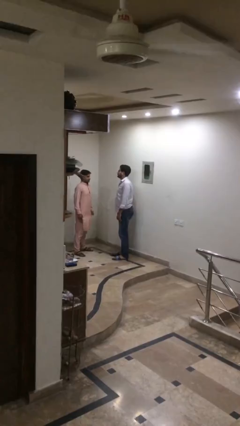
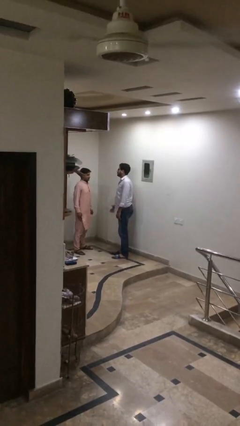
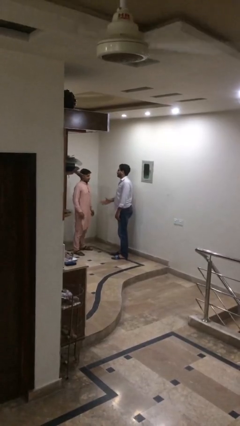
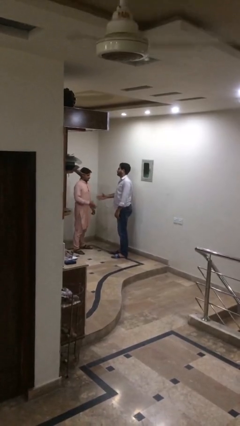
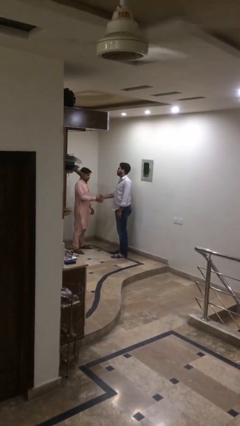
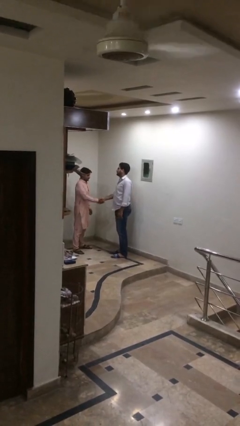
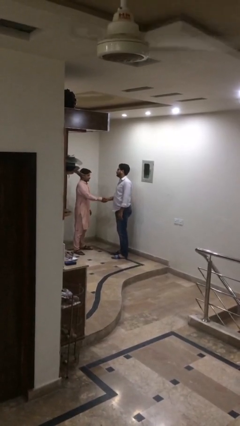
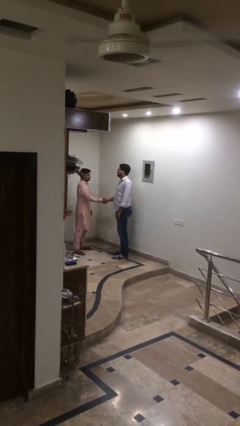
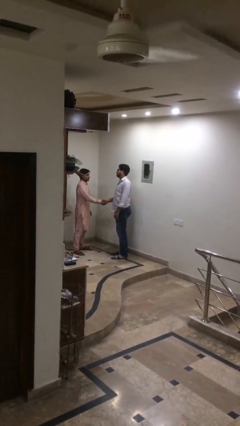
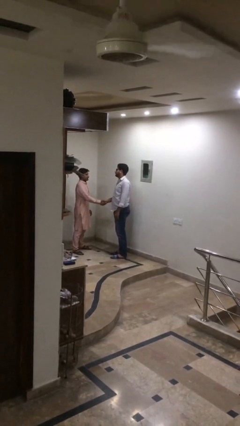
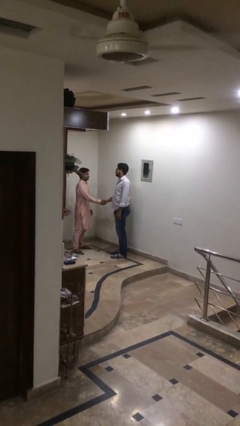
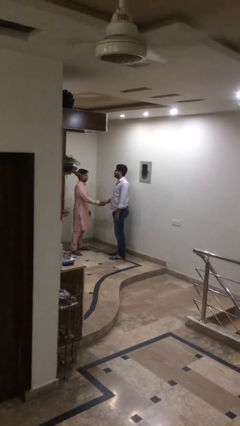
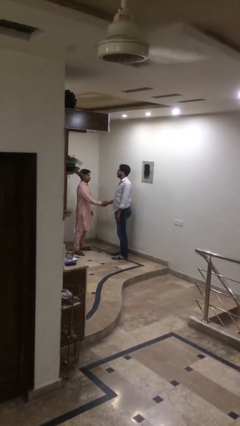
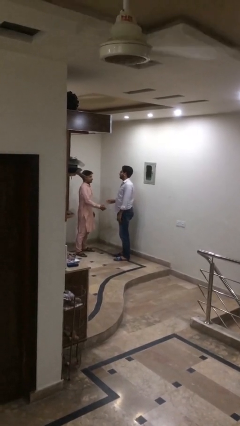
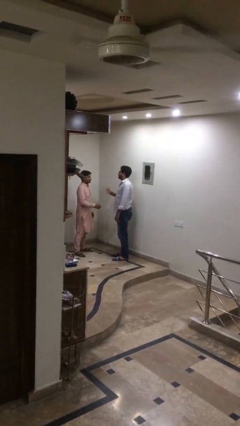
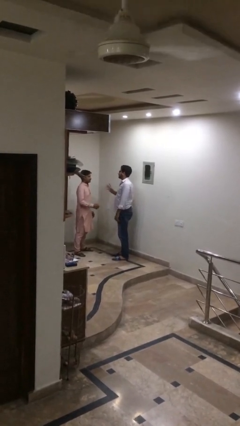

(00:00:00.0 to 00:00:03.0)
person shakes hand

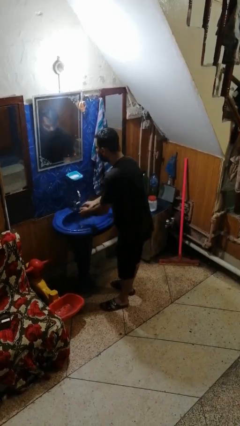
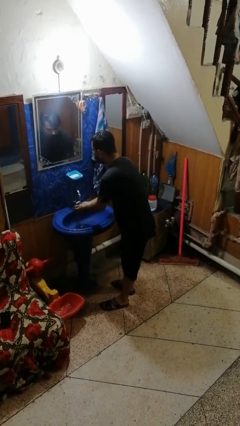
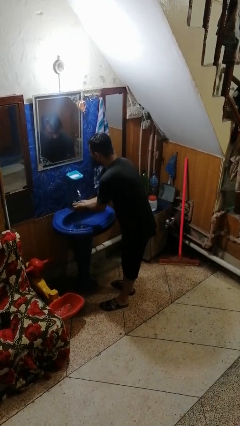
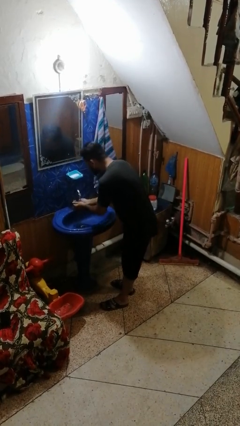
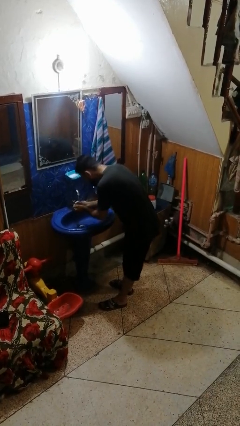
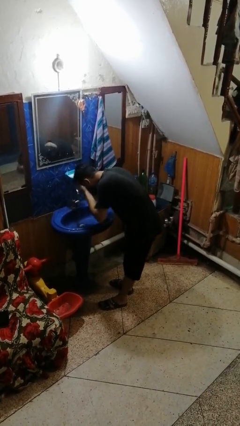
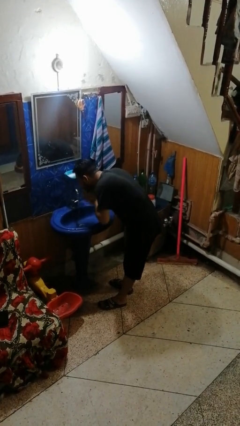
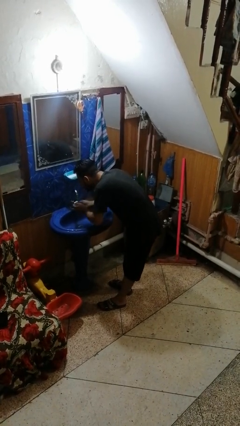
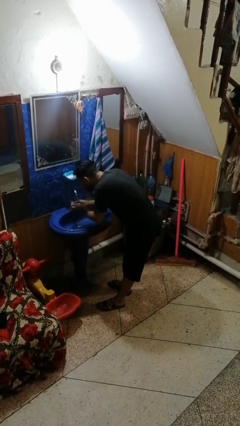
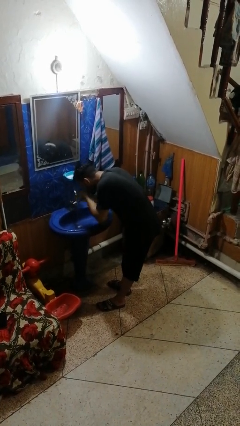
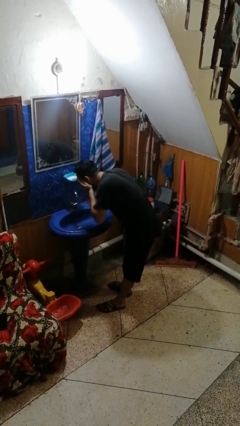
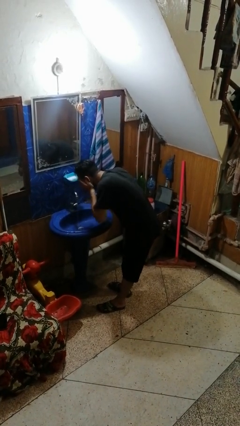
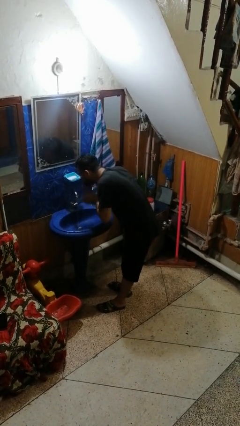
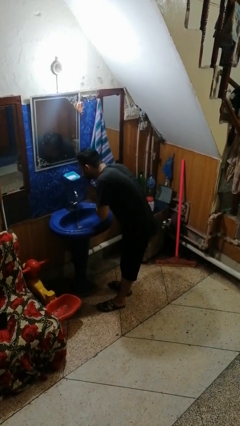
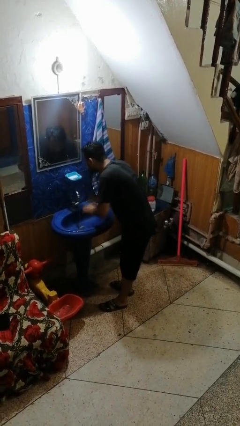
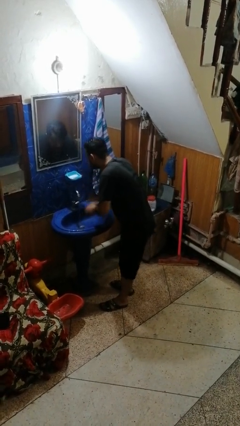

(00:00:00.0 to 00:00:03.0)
person washes face

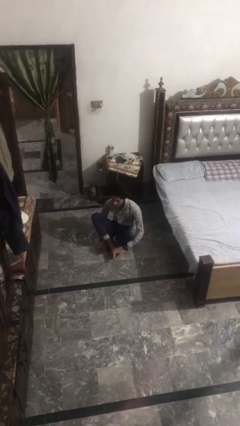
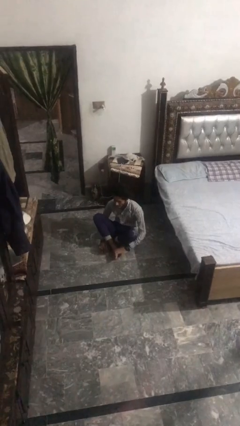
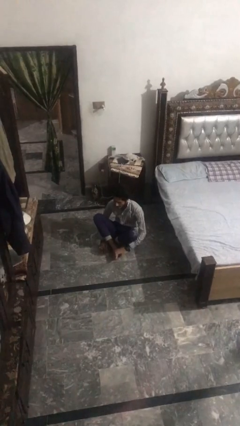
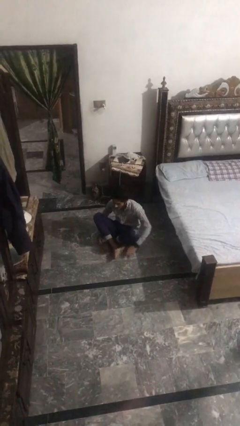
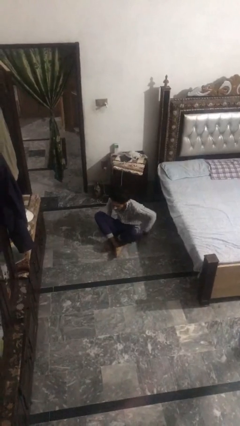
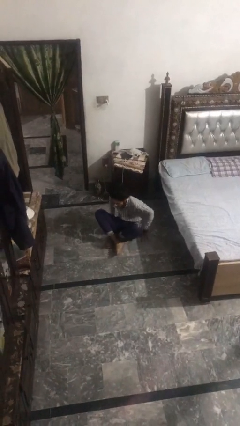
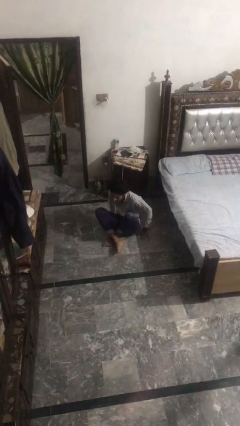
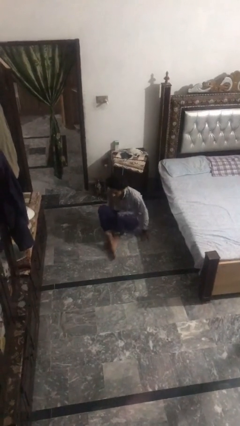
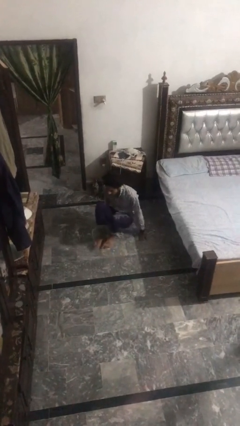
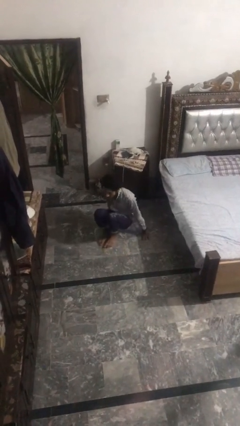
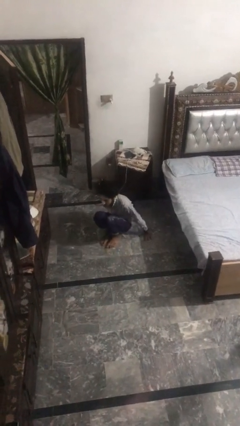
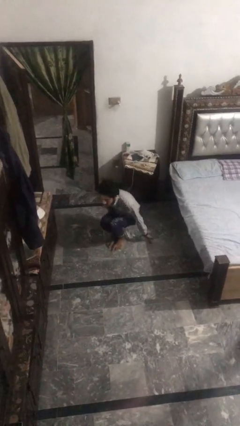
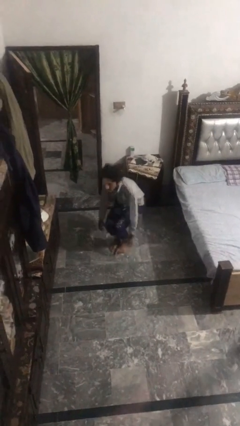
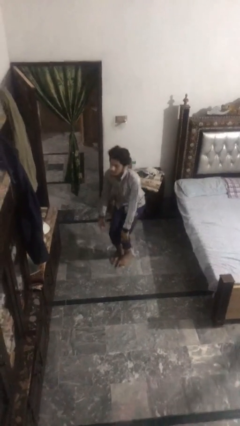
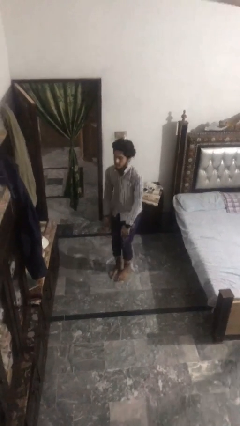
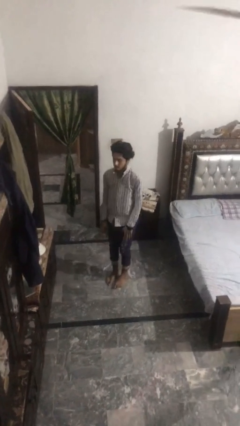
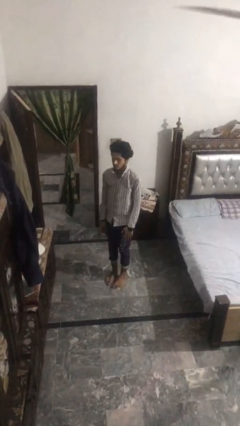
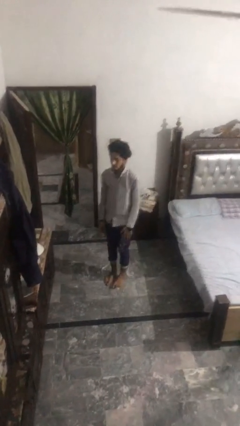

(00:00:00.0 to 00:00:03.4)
person stands up from floor

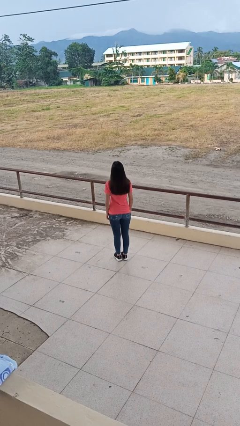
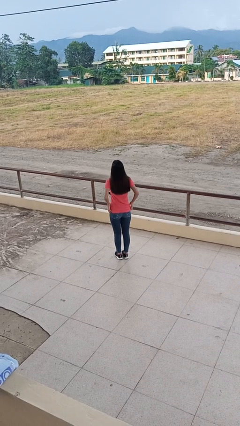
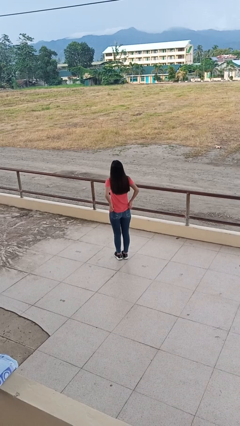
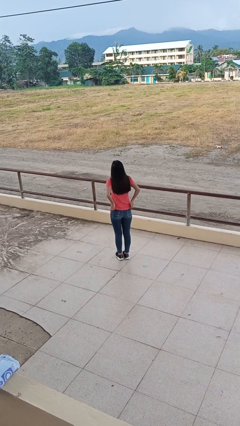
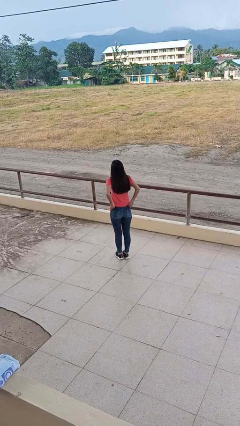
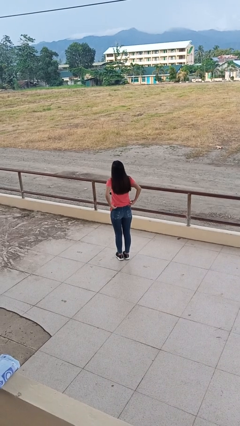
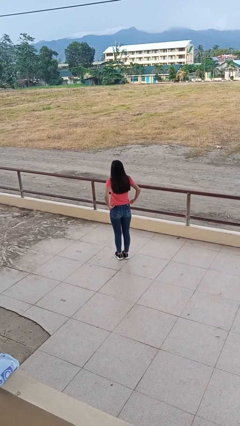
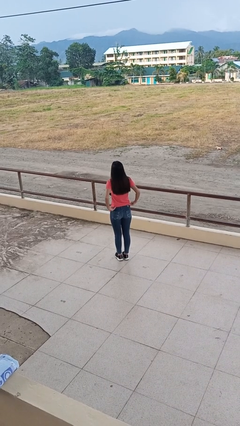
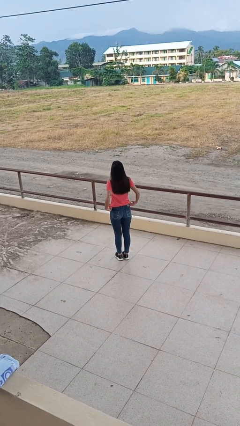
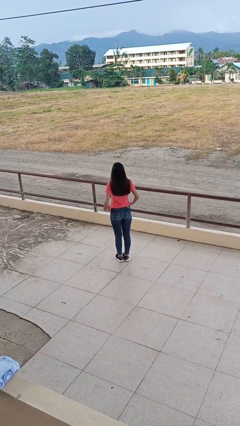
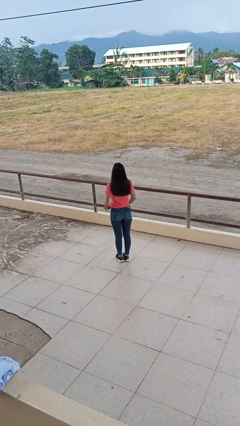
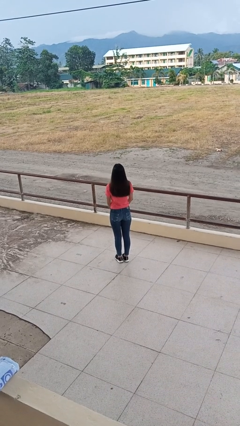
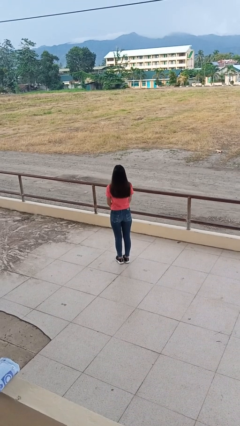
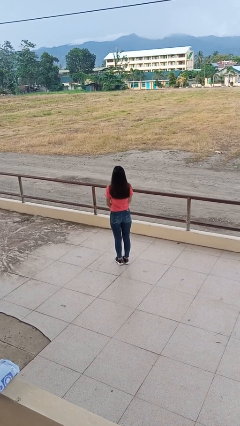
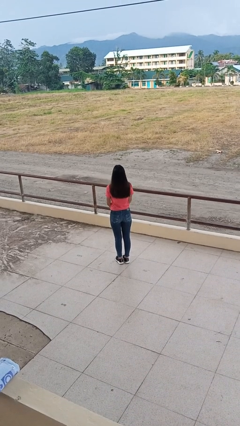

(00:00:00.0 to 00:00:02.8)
person tucks in shirt

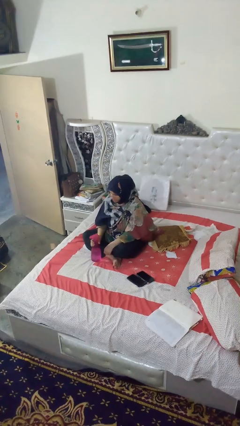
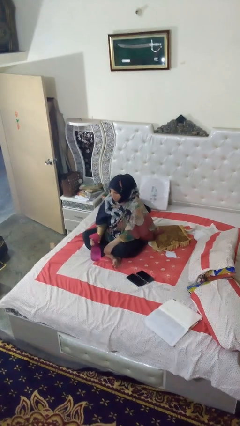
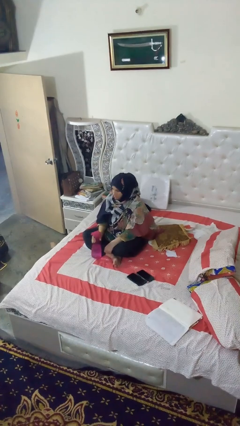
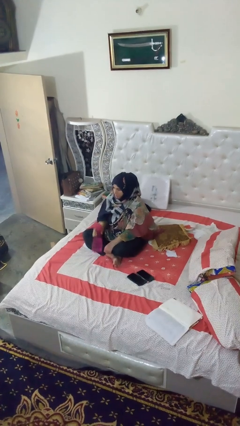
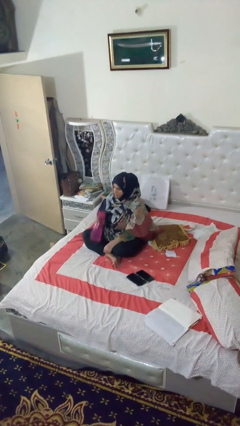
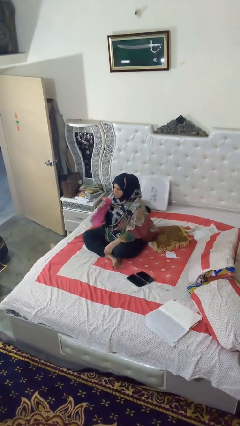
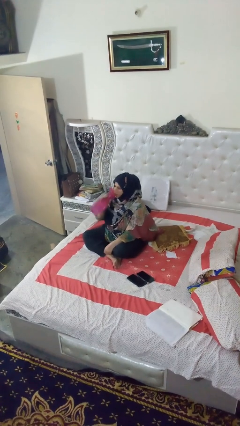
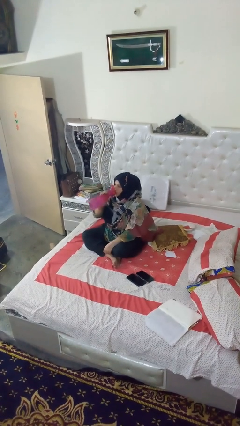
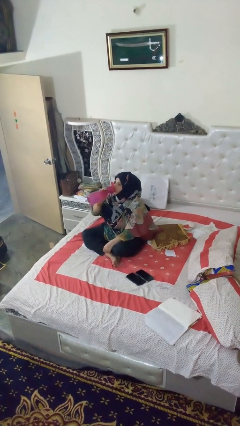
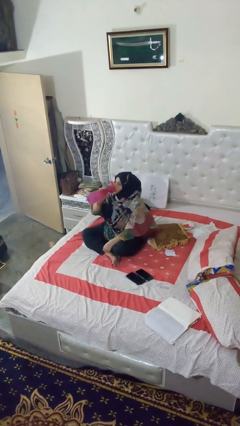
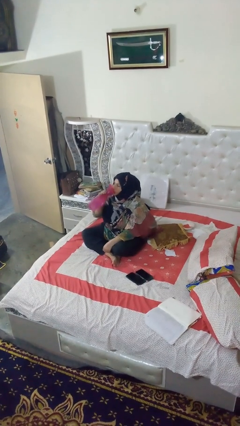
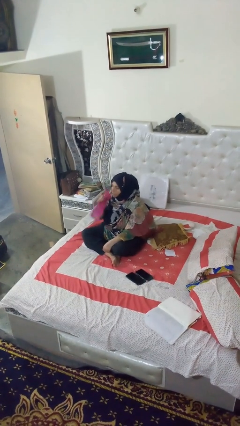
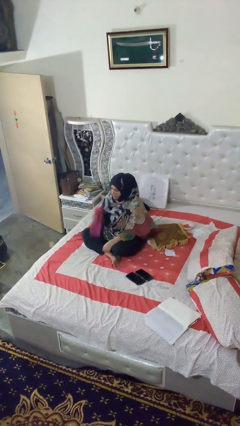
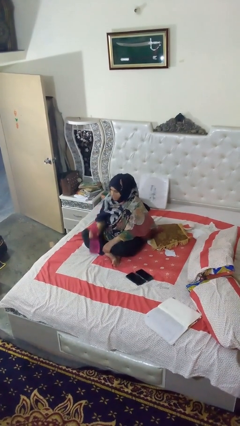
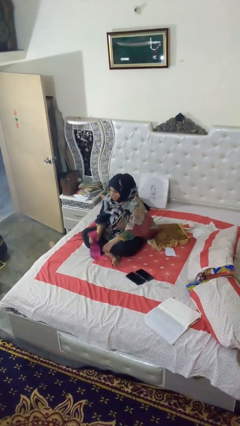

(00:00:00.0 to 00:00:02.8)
person drinks from bottle

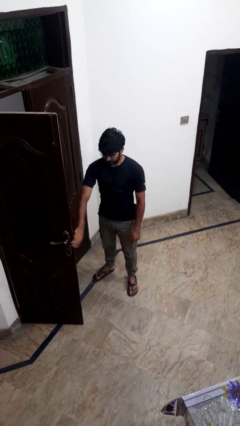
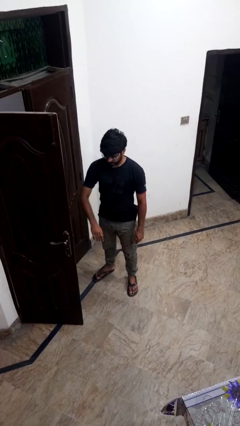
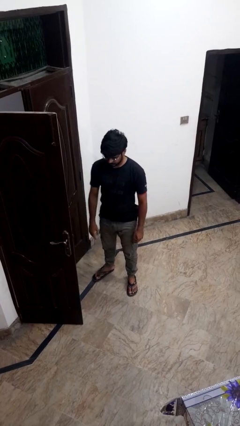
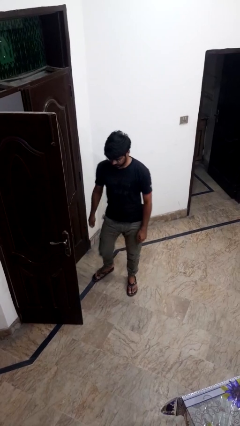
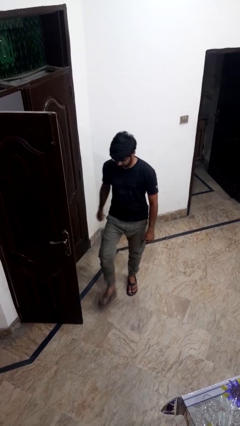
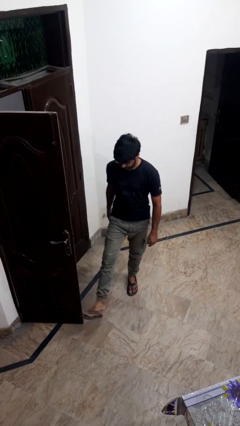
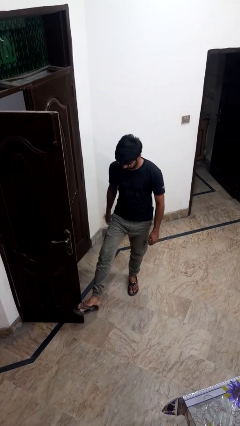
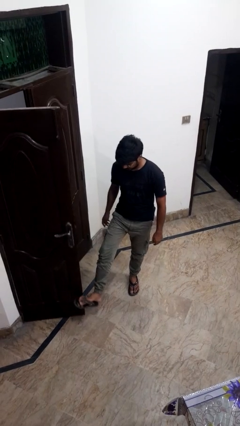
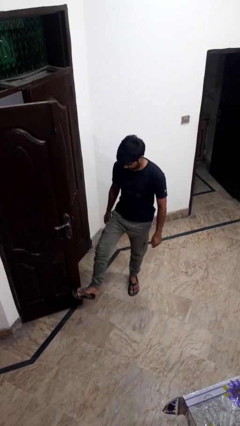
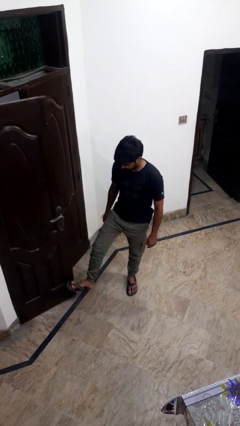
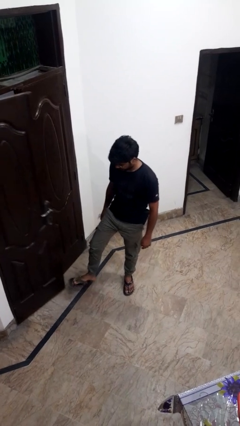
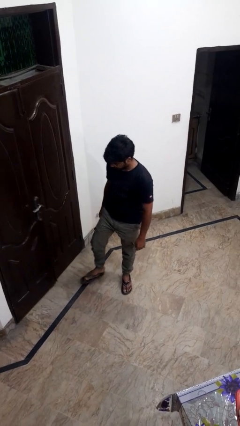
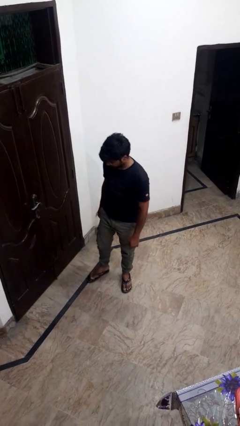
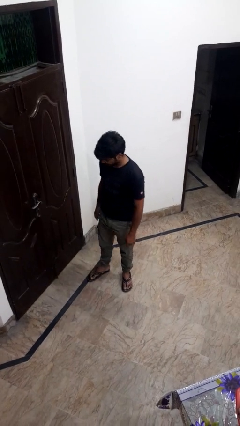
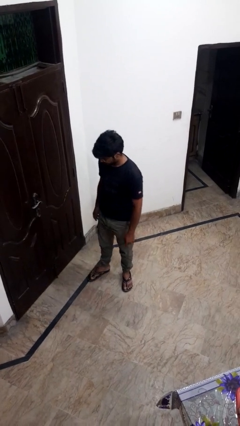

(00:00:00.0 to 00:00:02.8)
person closes door with foot
